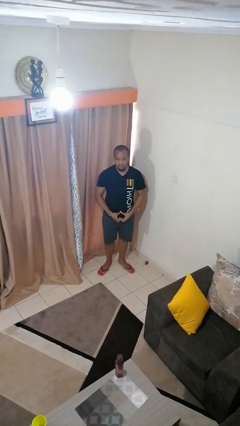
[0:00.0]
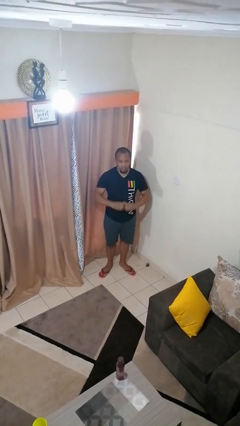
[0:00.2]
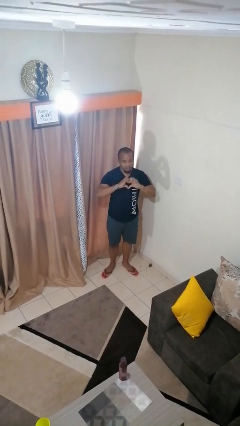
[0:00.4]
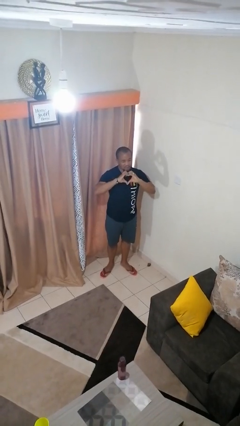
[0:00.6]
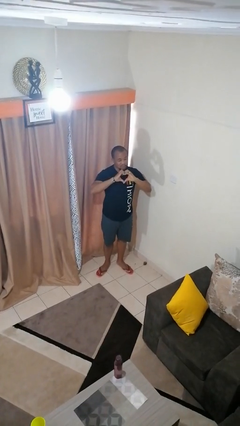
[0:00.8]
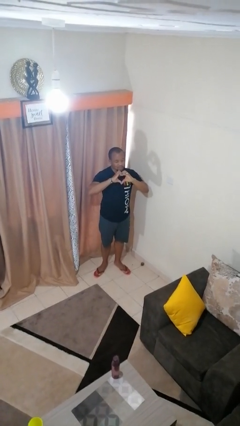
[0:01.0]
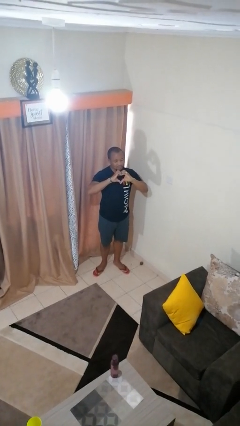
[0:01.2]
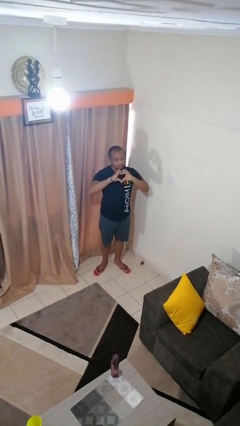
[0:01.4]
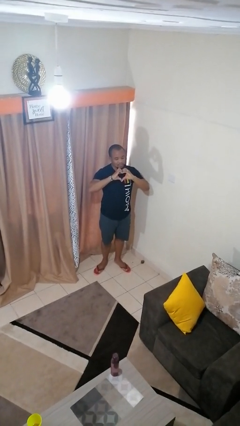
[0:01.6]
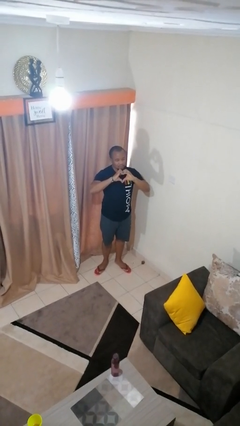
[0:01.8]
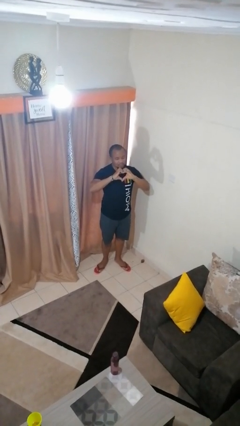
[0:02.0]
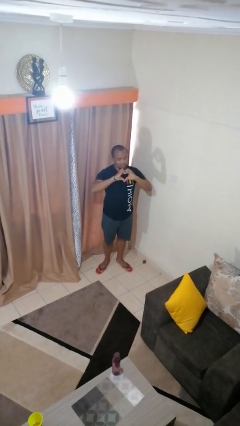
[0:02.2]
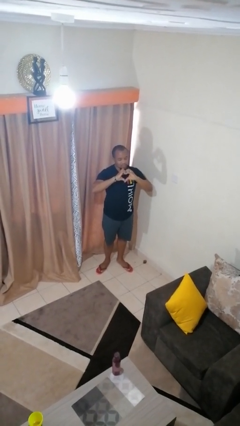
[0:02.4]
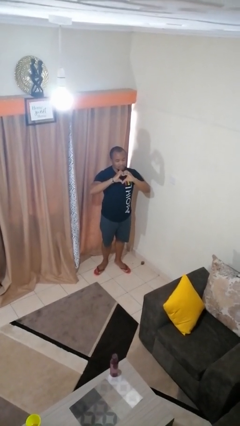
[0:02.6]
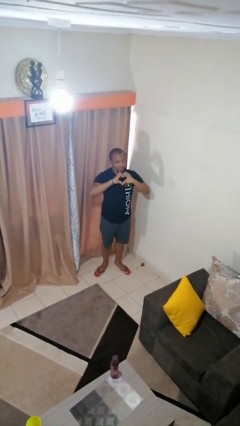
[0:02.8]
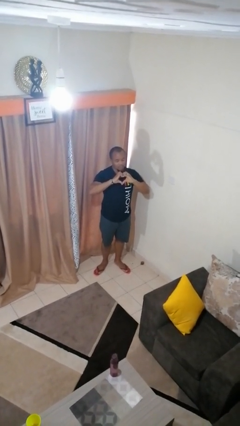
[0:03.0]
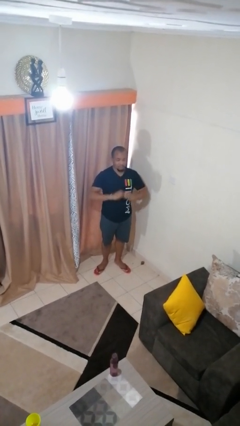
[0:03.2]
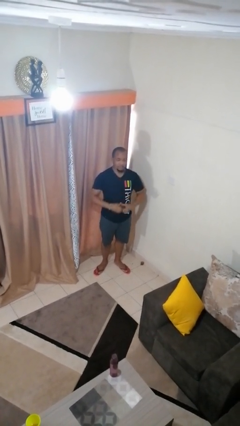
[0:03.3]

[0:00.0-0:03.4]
person gestures heart

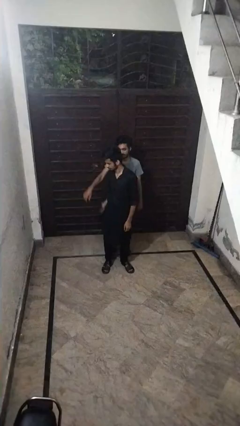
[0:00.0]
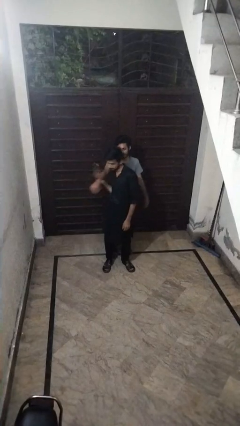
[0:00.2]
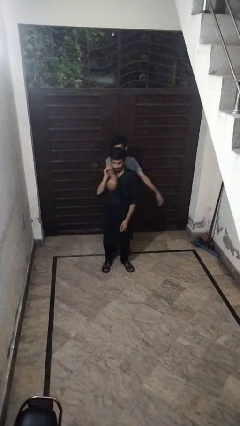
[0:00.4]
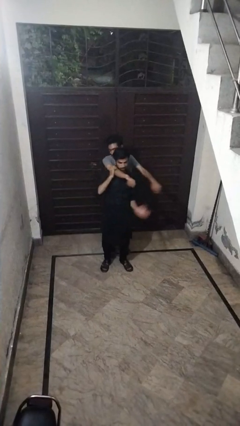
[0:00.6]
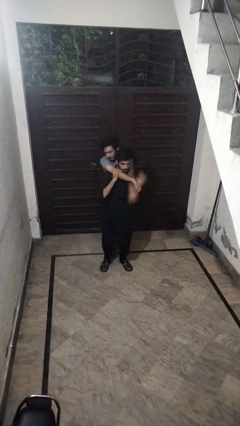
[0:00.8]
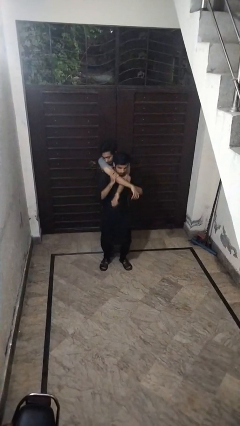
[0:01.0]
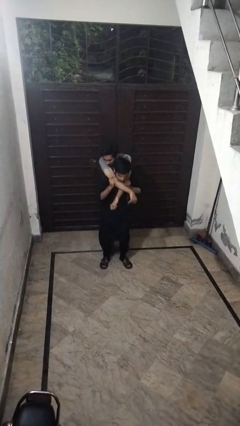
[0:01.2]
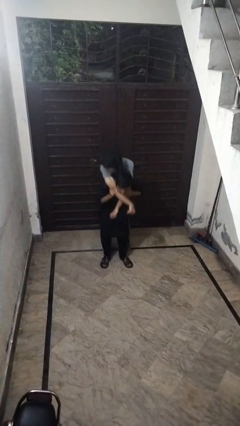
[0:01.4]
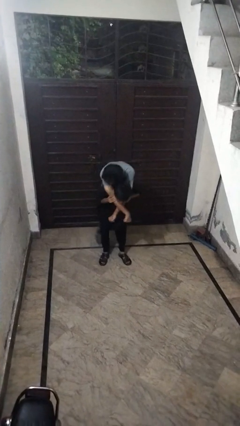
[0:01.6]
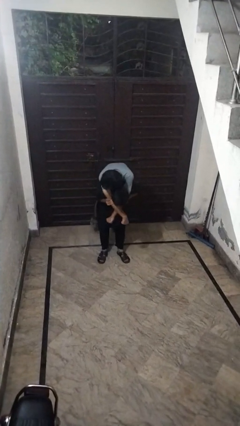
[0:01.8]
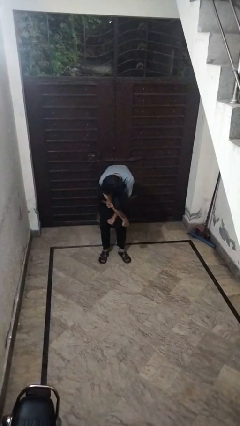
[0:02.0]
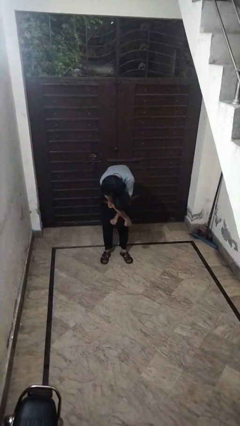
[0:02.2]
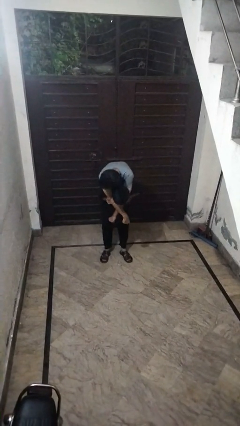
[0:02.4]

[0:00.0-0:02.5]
person carries person over shoulder

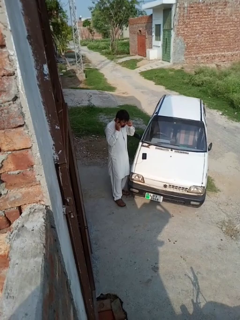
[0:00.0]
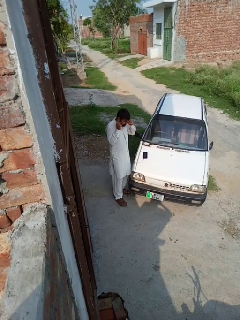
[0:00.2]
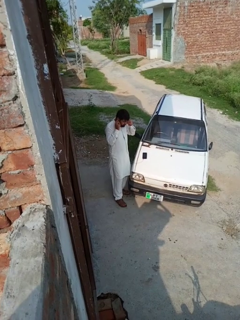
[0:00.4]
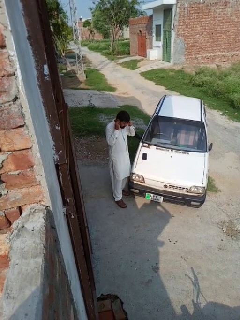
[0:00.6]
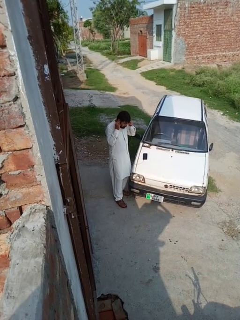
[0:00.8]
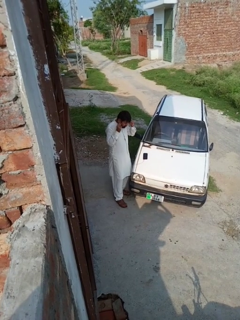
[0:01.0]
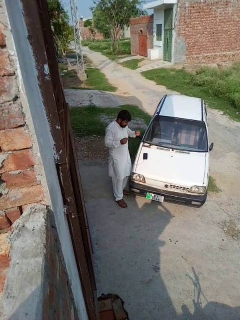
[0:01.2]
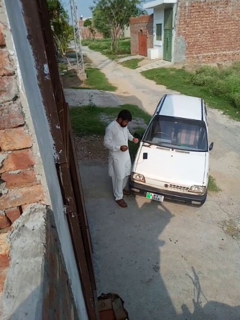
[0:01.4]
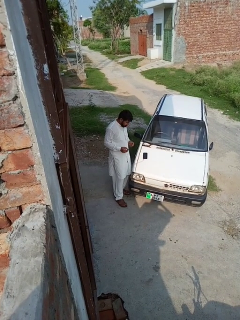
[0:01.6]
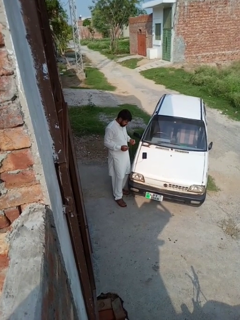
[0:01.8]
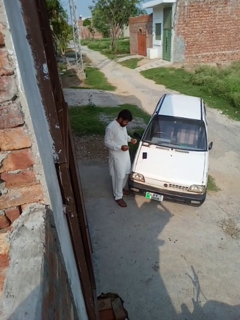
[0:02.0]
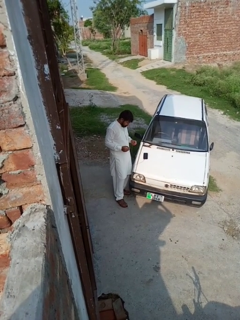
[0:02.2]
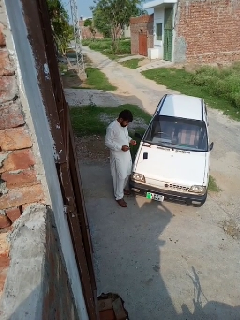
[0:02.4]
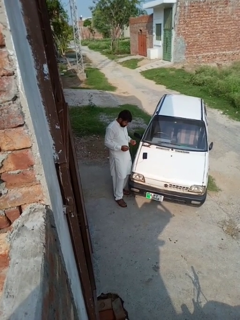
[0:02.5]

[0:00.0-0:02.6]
person takes off headphones

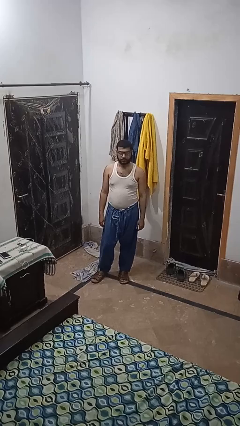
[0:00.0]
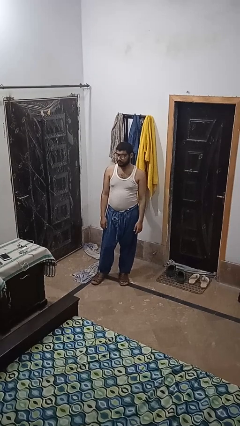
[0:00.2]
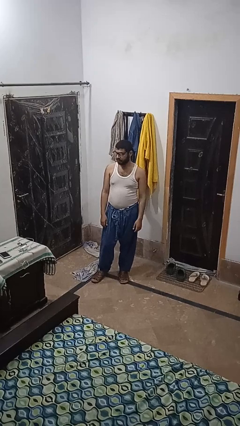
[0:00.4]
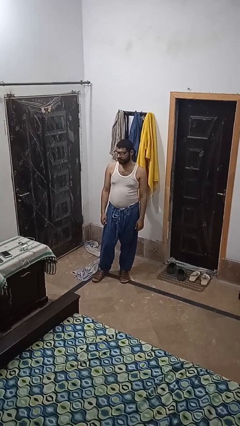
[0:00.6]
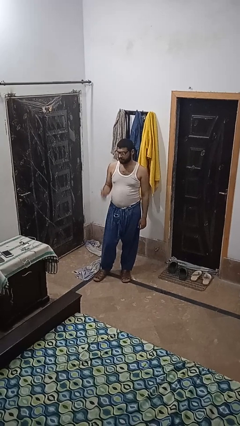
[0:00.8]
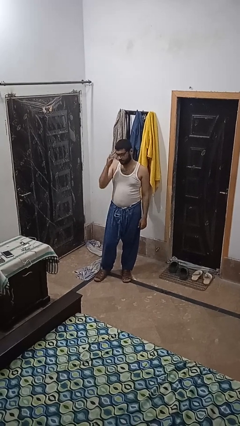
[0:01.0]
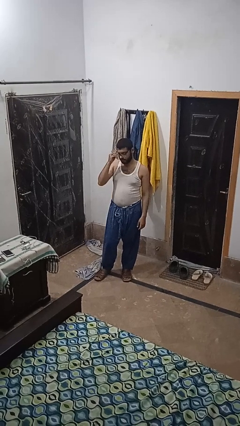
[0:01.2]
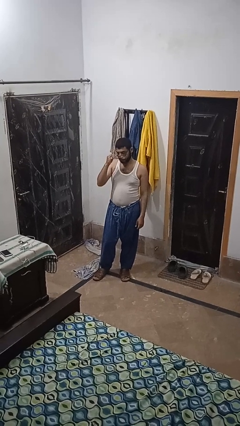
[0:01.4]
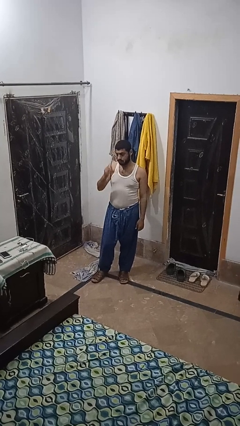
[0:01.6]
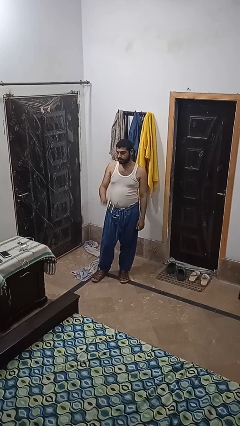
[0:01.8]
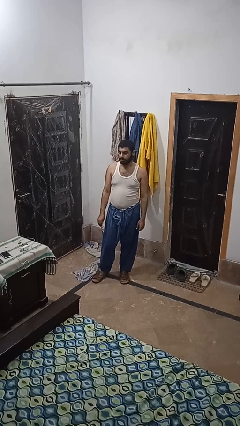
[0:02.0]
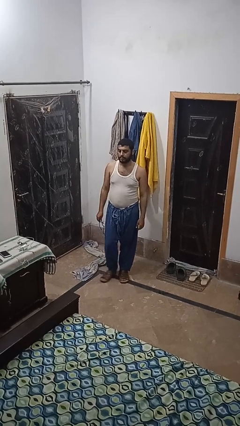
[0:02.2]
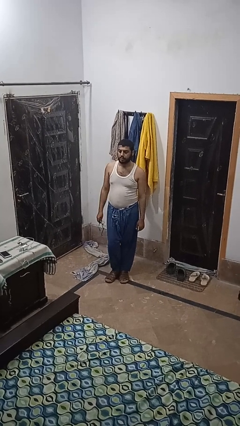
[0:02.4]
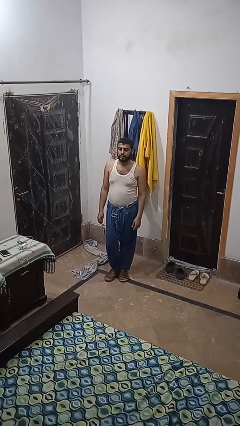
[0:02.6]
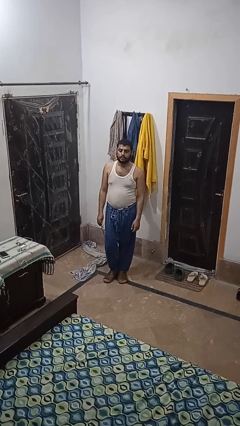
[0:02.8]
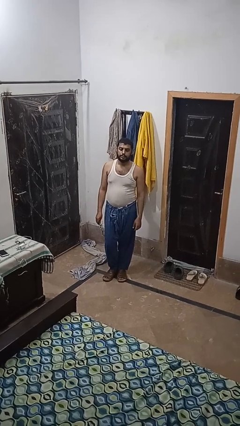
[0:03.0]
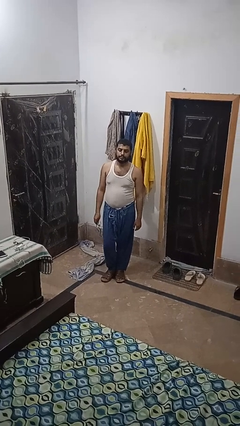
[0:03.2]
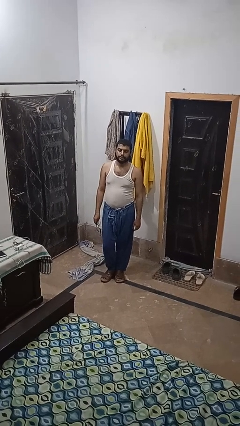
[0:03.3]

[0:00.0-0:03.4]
person takes off glasses

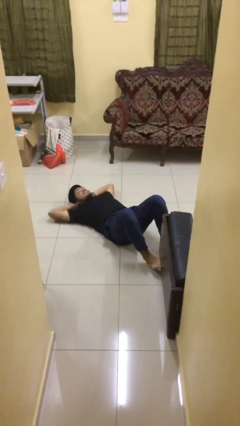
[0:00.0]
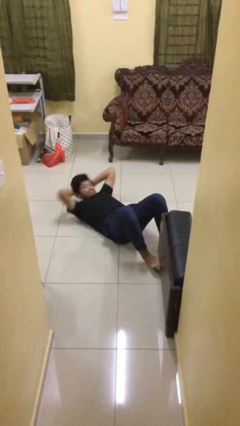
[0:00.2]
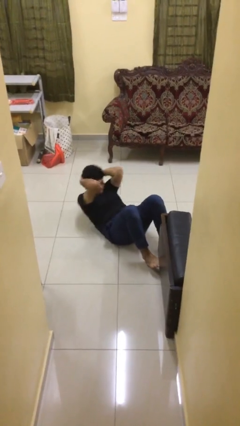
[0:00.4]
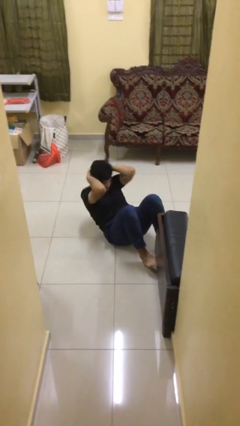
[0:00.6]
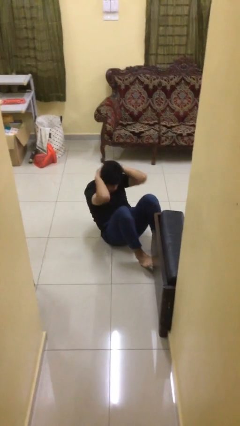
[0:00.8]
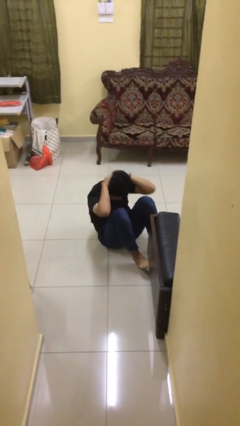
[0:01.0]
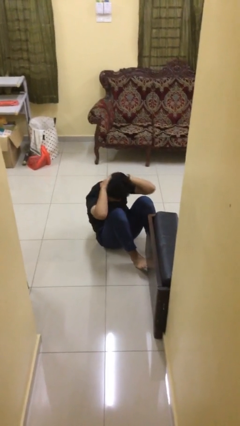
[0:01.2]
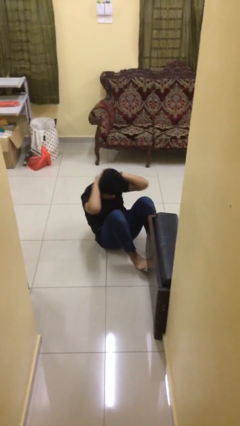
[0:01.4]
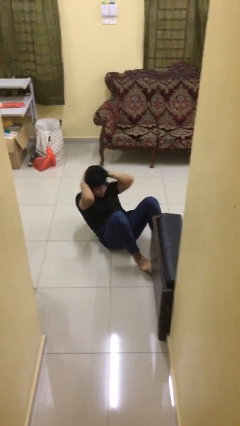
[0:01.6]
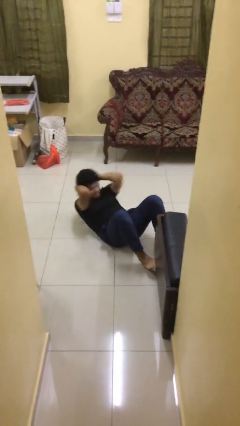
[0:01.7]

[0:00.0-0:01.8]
person exercises with situp

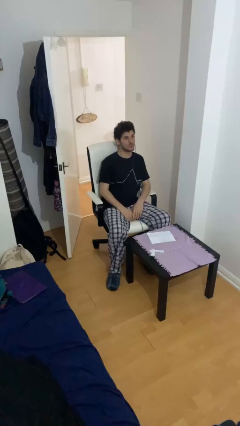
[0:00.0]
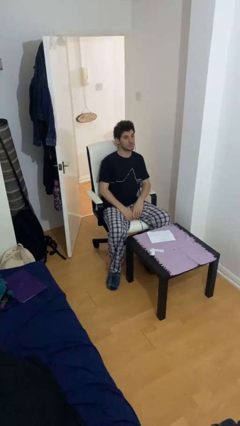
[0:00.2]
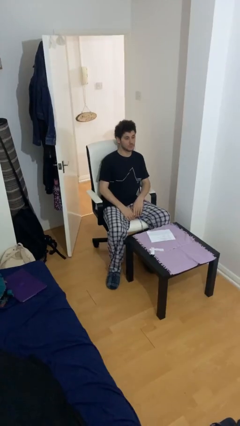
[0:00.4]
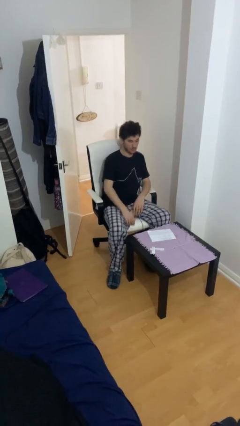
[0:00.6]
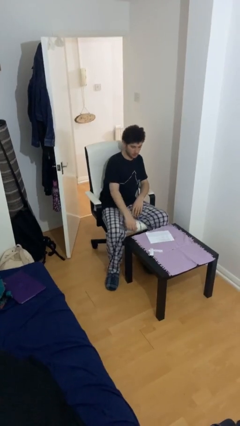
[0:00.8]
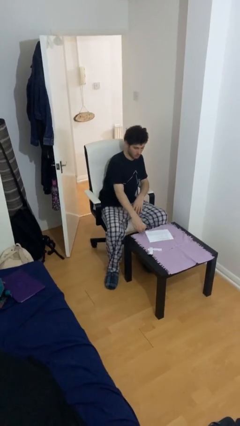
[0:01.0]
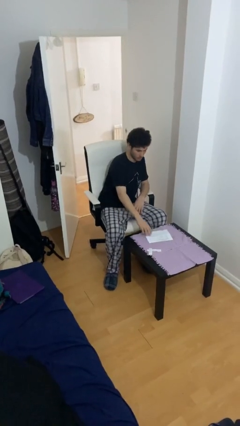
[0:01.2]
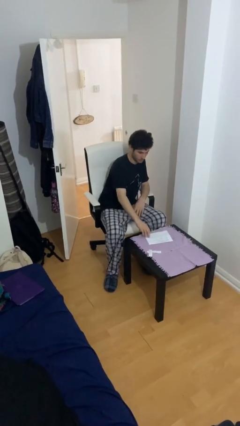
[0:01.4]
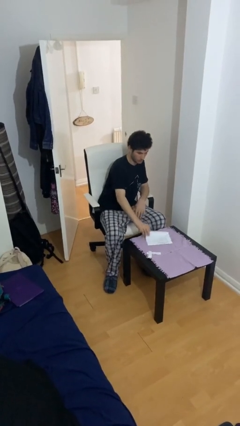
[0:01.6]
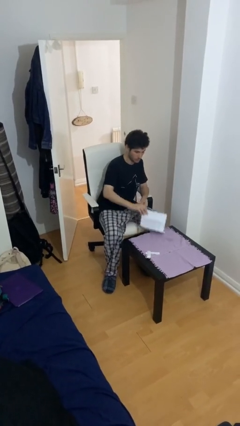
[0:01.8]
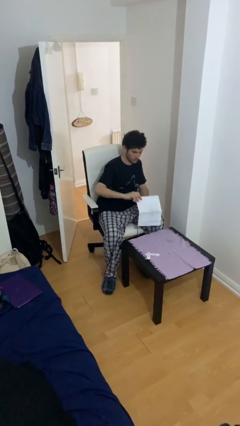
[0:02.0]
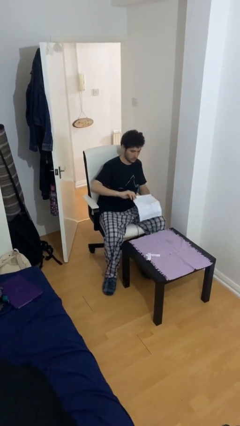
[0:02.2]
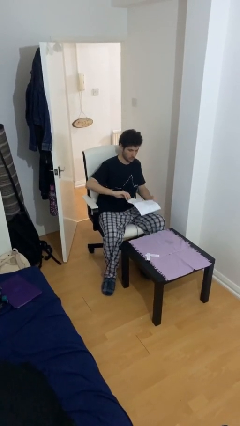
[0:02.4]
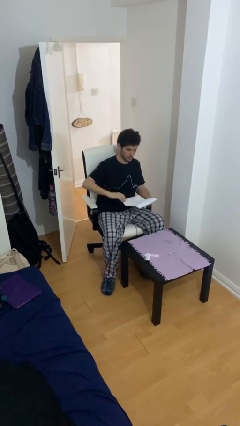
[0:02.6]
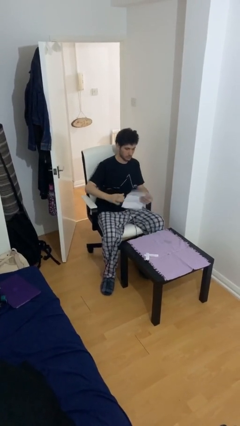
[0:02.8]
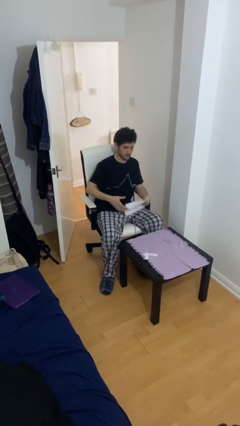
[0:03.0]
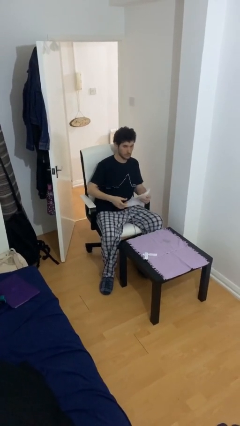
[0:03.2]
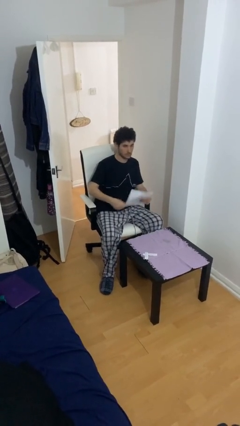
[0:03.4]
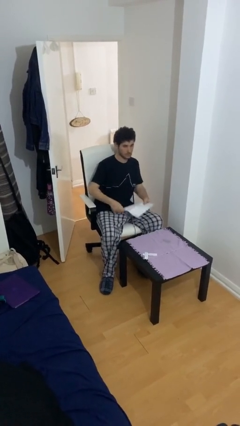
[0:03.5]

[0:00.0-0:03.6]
person picks up object from table

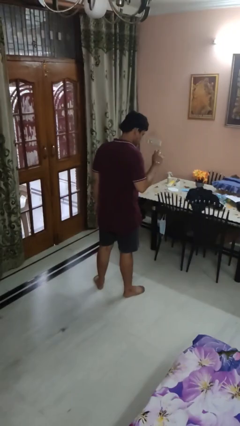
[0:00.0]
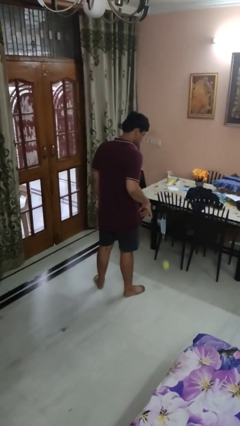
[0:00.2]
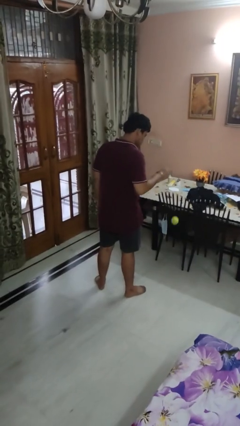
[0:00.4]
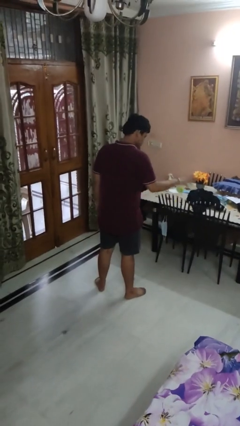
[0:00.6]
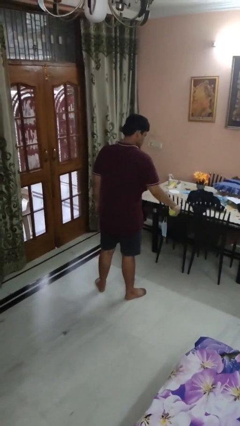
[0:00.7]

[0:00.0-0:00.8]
person bounces ball on floor
